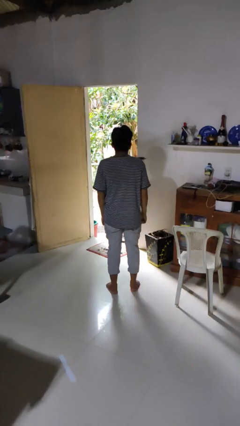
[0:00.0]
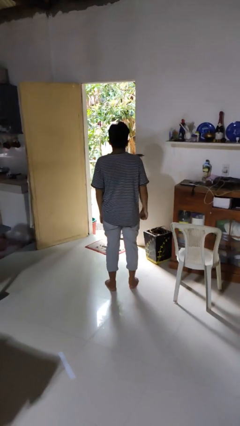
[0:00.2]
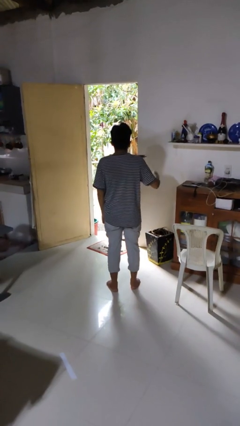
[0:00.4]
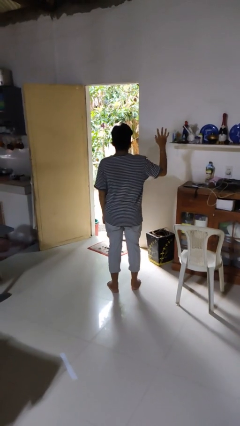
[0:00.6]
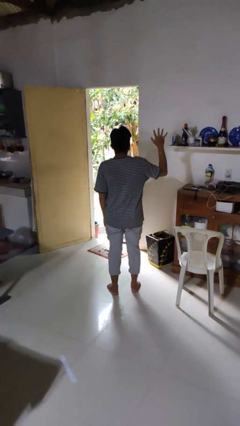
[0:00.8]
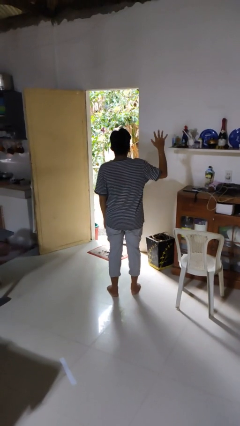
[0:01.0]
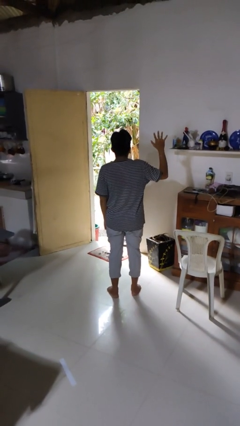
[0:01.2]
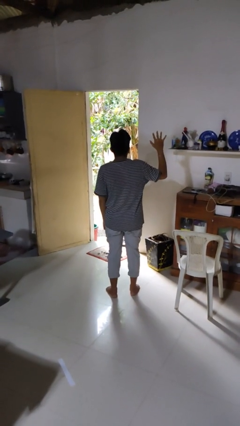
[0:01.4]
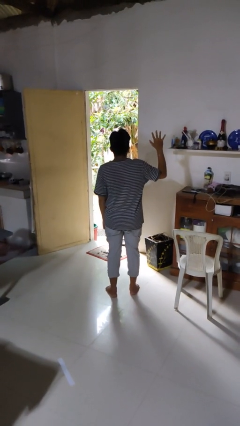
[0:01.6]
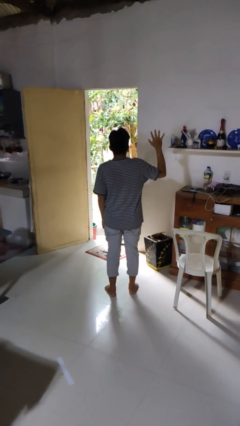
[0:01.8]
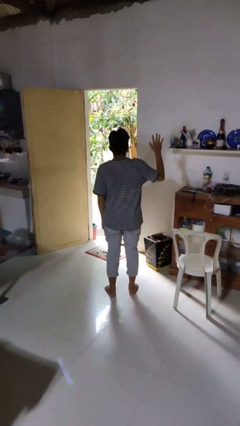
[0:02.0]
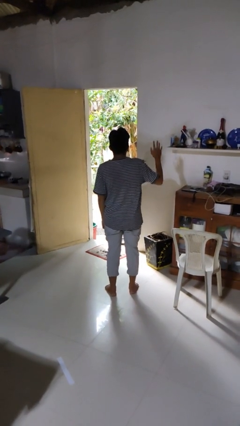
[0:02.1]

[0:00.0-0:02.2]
person gestures number five

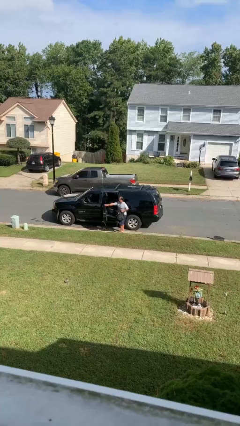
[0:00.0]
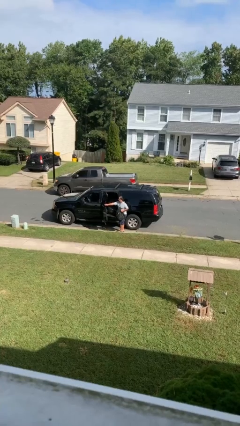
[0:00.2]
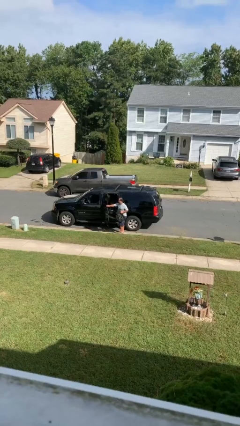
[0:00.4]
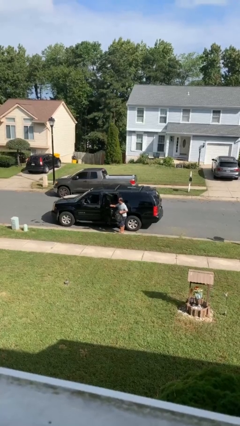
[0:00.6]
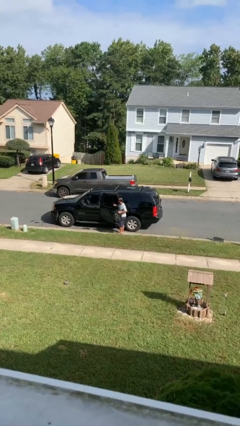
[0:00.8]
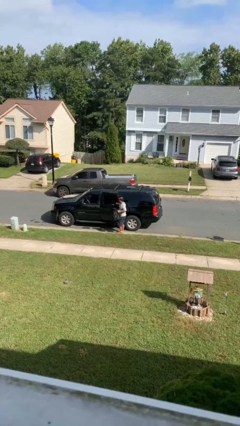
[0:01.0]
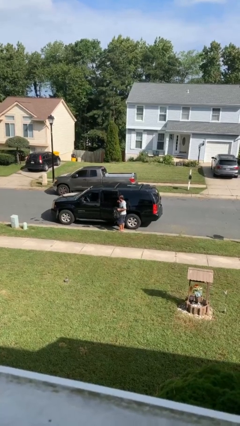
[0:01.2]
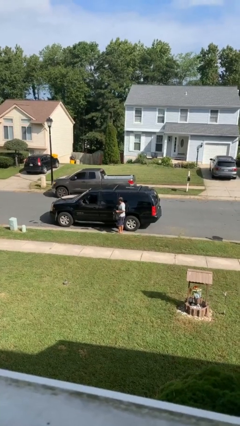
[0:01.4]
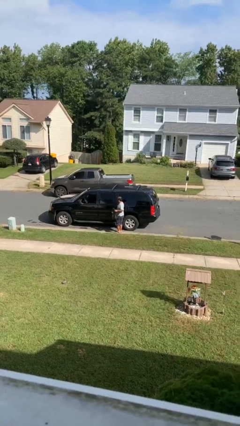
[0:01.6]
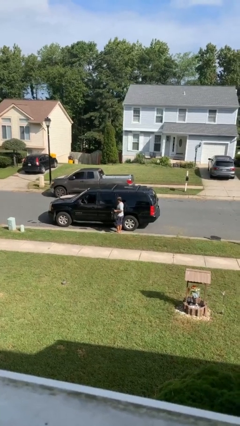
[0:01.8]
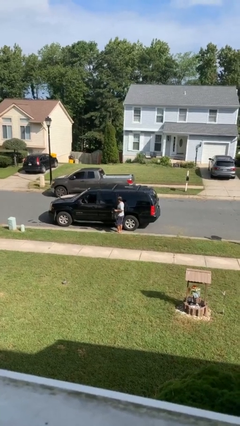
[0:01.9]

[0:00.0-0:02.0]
person closes car door

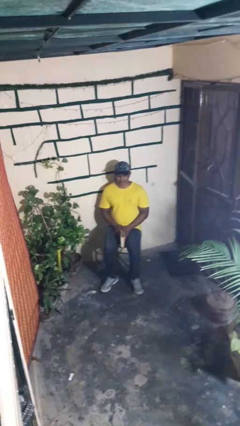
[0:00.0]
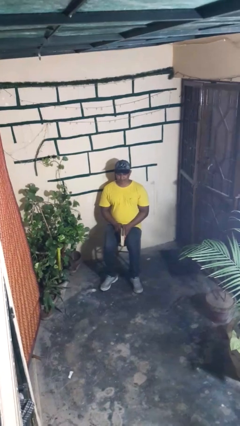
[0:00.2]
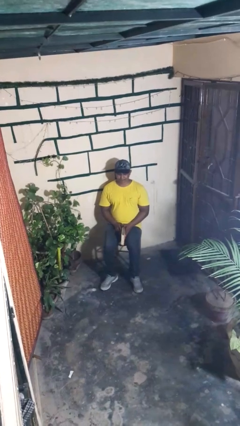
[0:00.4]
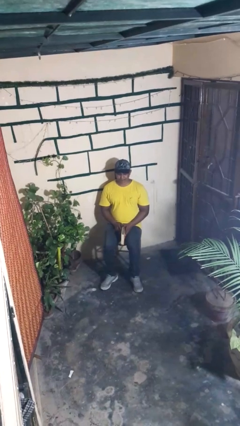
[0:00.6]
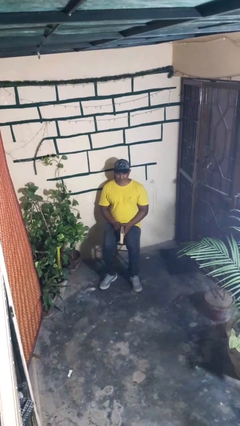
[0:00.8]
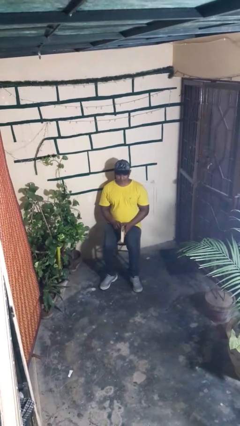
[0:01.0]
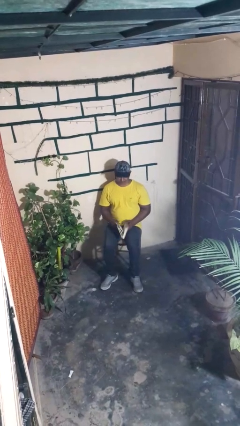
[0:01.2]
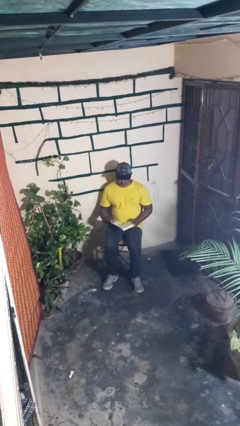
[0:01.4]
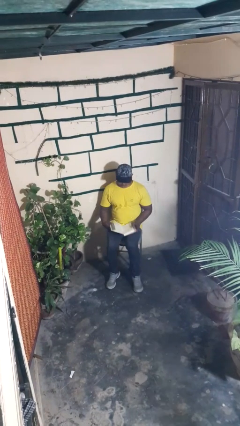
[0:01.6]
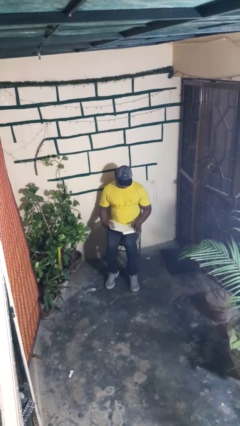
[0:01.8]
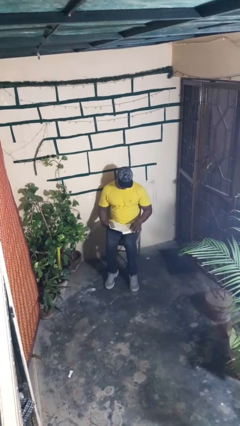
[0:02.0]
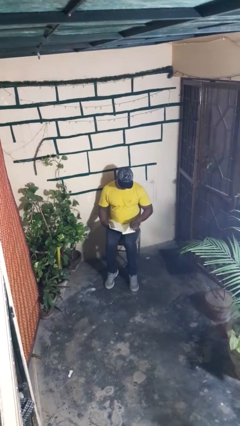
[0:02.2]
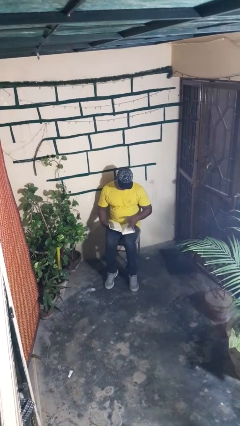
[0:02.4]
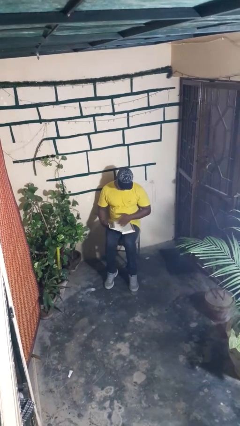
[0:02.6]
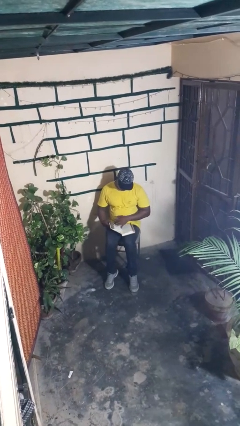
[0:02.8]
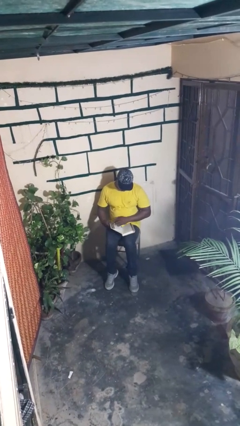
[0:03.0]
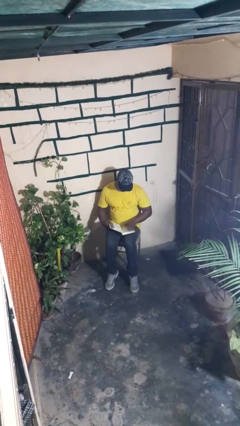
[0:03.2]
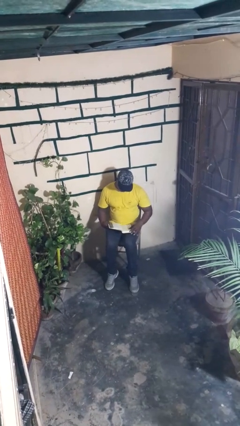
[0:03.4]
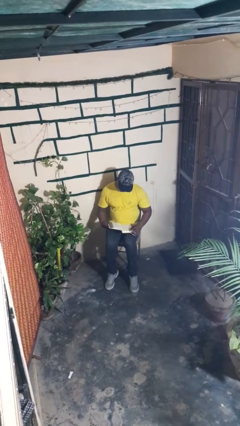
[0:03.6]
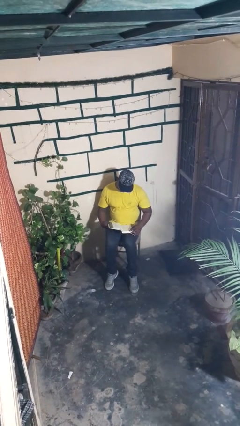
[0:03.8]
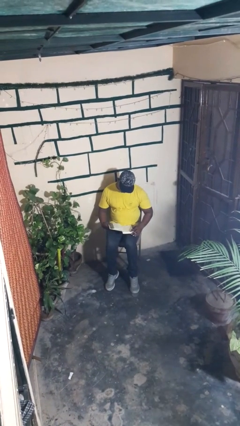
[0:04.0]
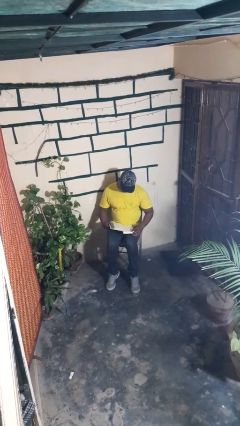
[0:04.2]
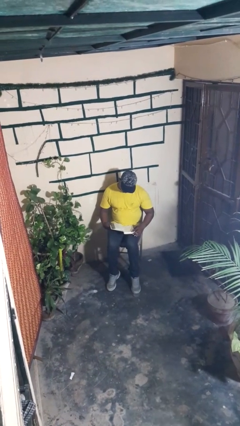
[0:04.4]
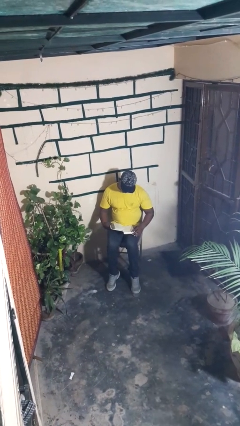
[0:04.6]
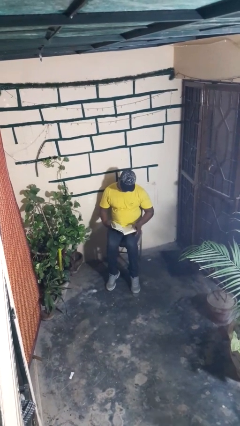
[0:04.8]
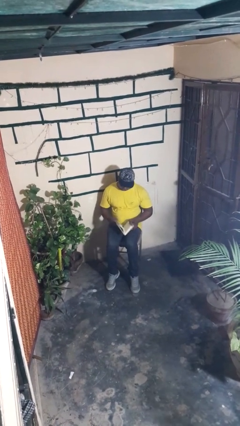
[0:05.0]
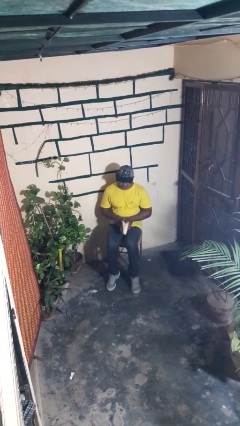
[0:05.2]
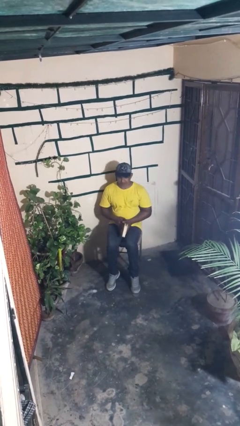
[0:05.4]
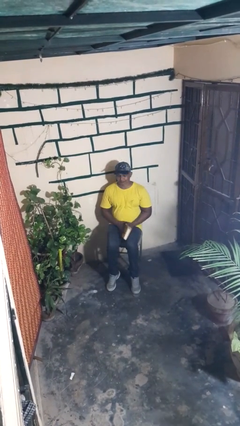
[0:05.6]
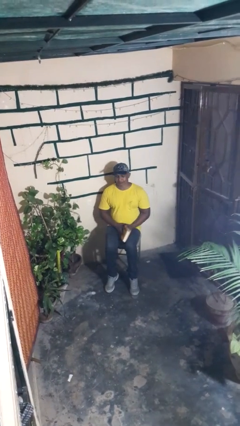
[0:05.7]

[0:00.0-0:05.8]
person reads book

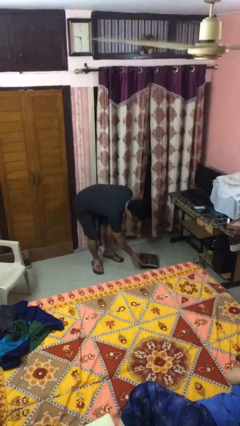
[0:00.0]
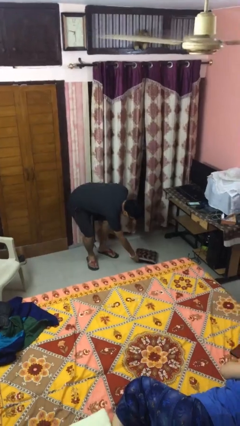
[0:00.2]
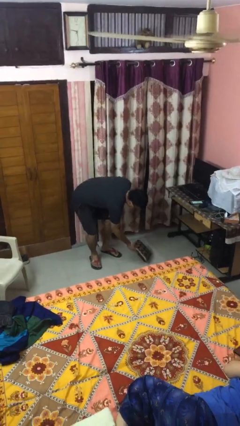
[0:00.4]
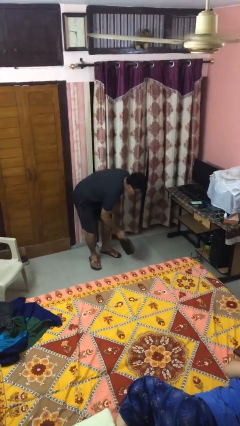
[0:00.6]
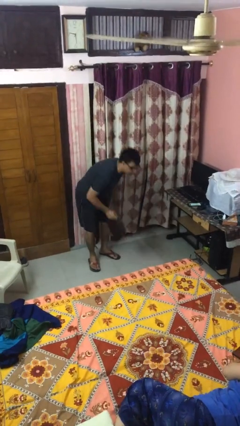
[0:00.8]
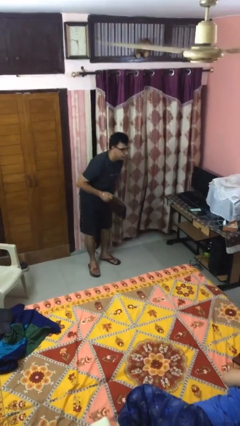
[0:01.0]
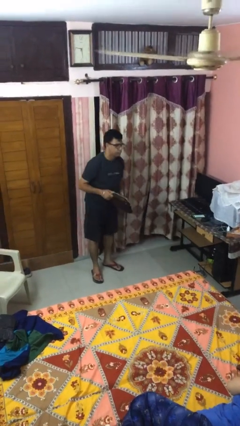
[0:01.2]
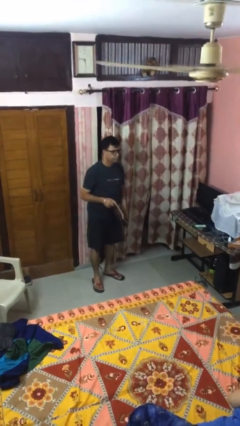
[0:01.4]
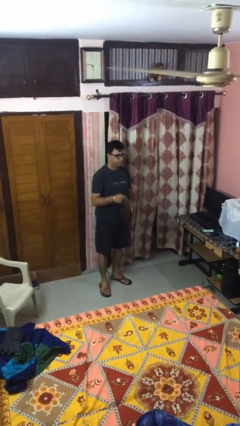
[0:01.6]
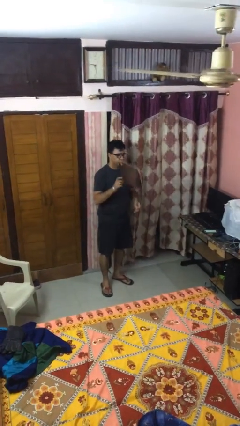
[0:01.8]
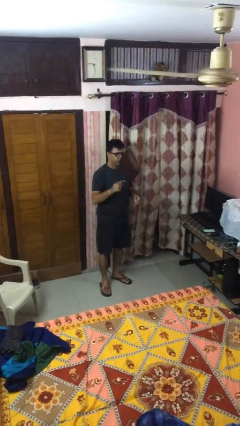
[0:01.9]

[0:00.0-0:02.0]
person picks up object from floor

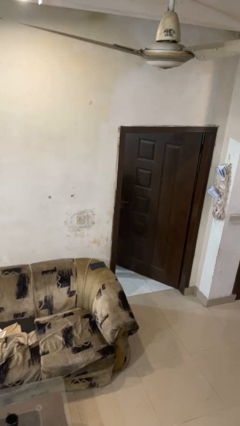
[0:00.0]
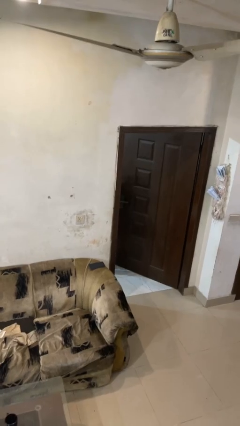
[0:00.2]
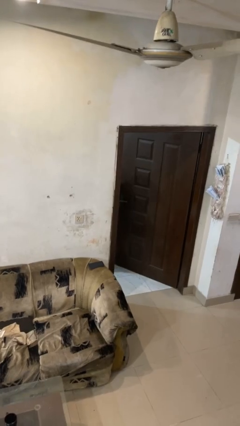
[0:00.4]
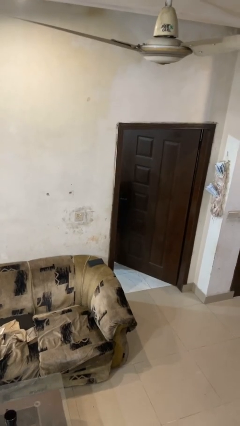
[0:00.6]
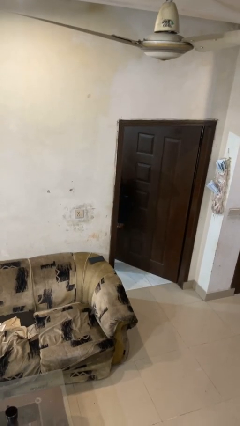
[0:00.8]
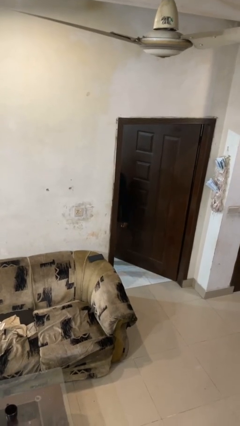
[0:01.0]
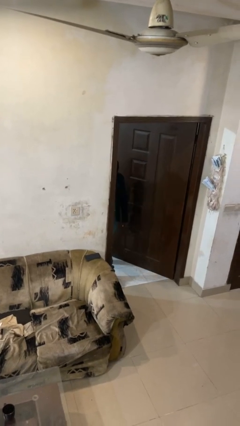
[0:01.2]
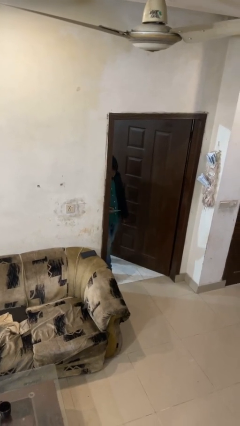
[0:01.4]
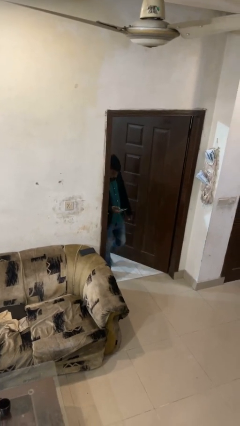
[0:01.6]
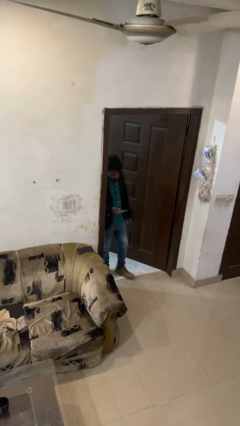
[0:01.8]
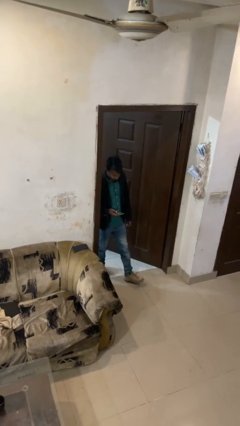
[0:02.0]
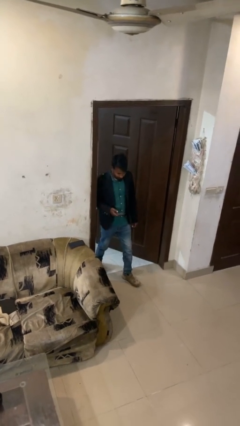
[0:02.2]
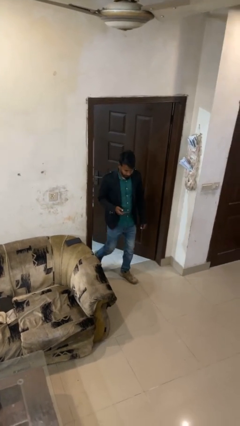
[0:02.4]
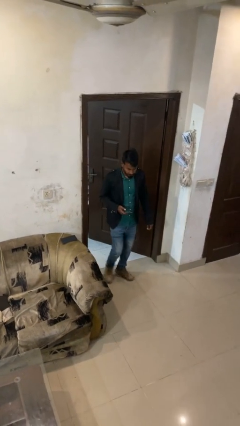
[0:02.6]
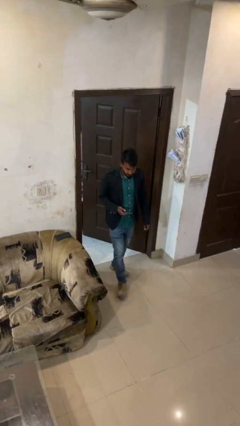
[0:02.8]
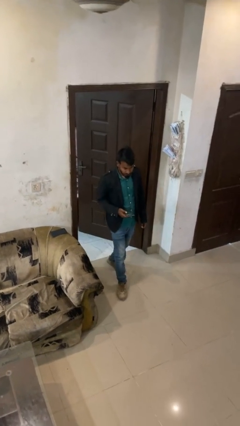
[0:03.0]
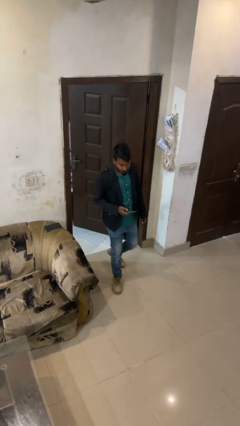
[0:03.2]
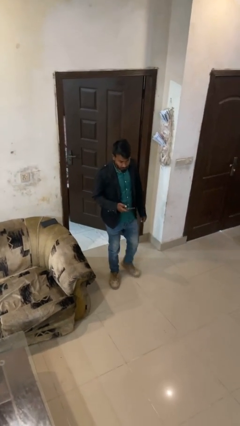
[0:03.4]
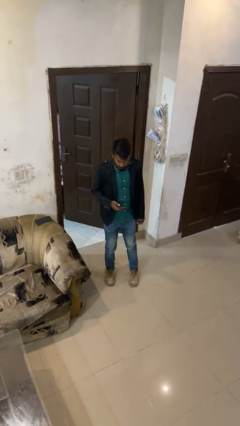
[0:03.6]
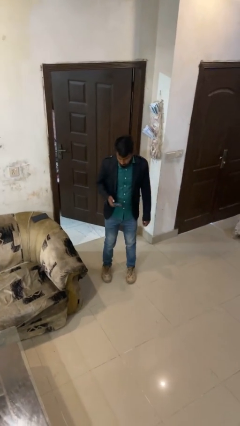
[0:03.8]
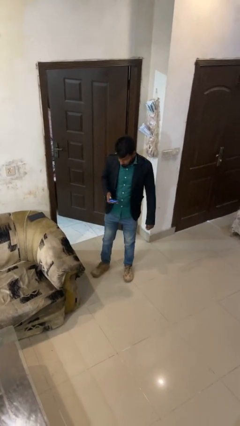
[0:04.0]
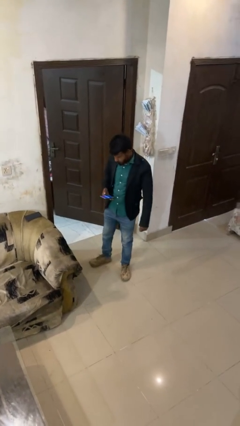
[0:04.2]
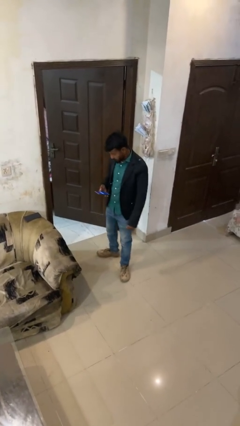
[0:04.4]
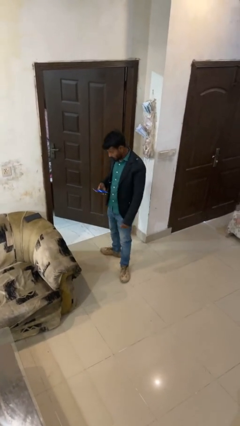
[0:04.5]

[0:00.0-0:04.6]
person enters scene through structure

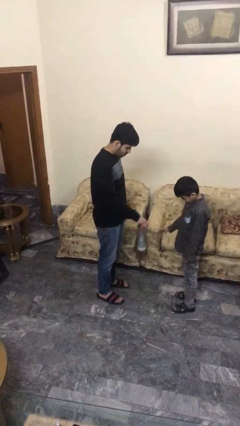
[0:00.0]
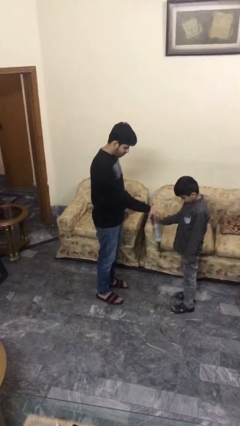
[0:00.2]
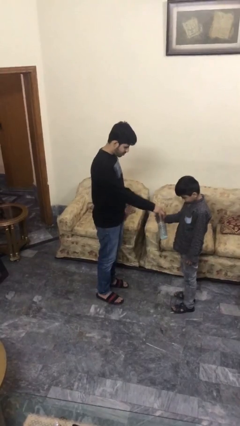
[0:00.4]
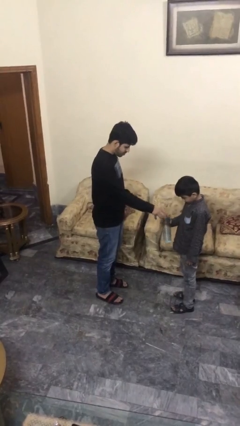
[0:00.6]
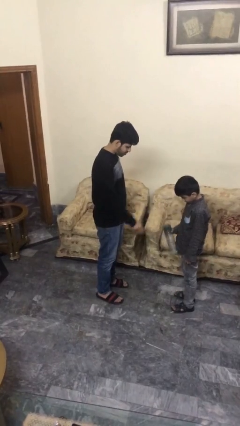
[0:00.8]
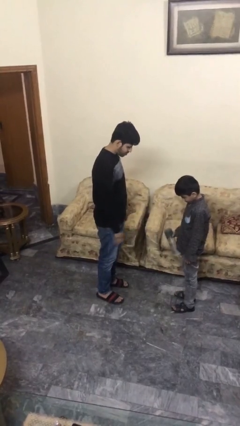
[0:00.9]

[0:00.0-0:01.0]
person transfers object to person
